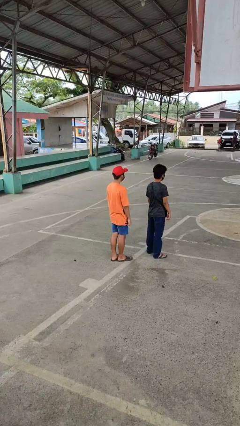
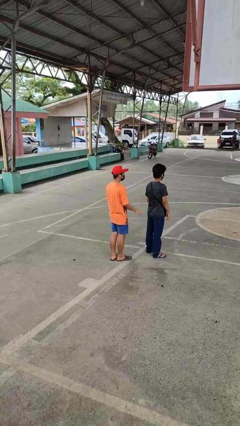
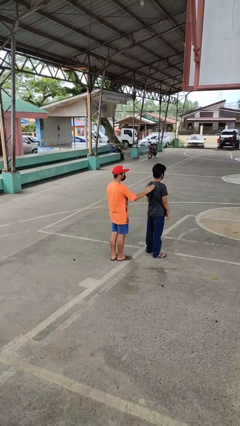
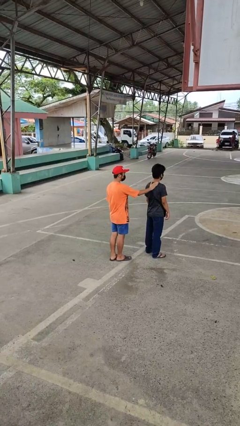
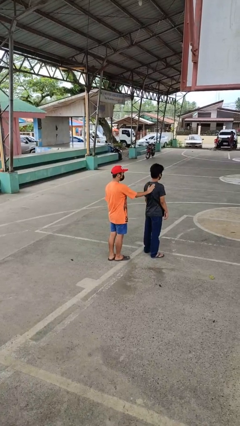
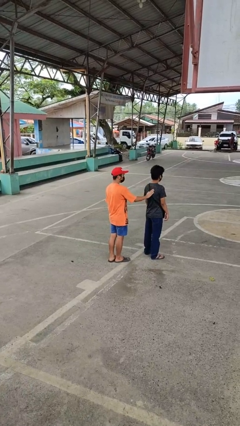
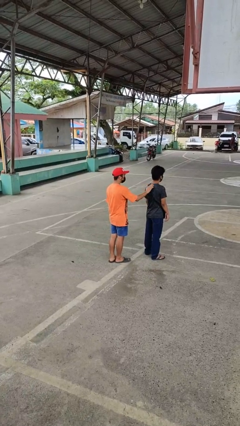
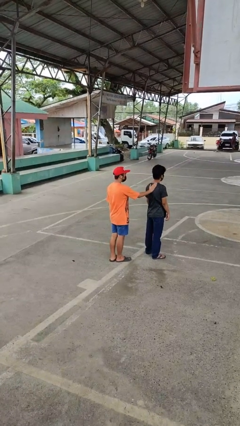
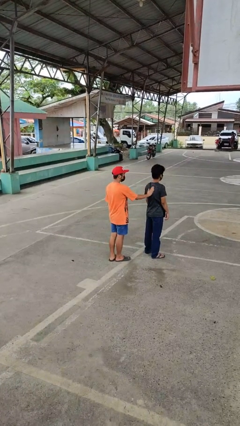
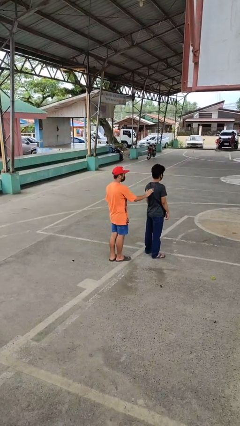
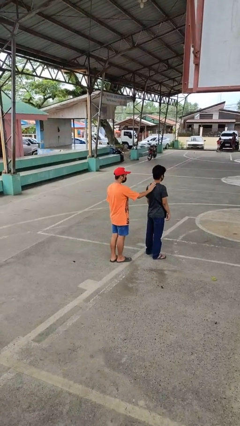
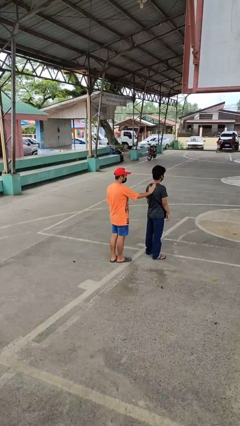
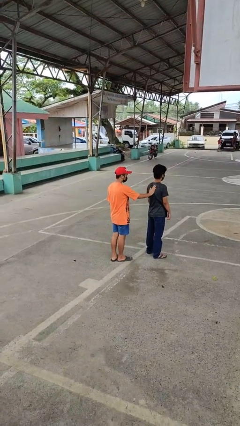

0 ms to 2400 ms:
person touches back of person

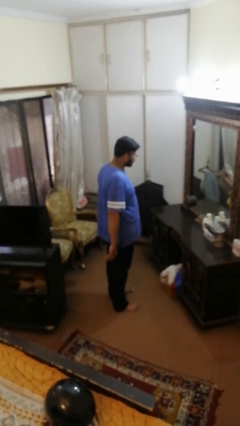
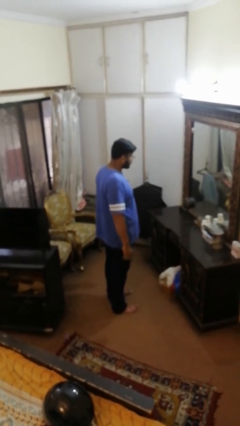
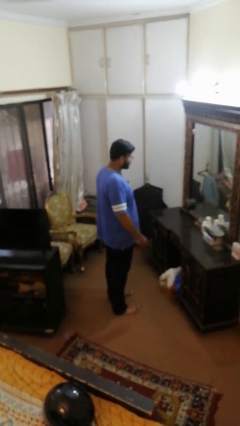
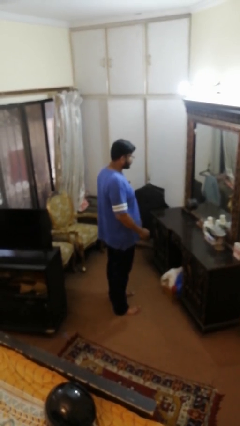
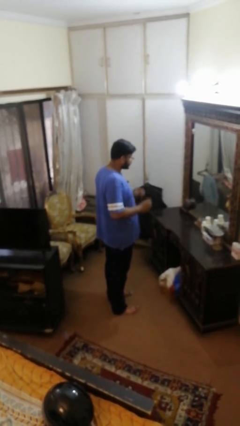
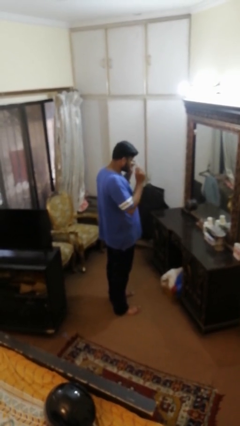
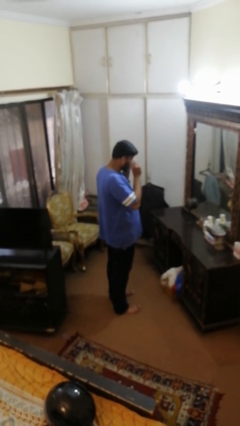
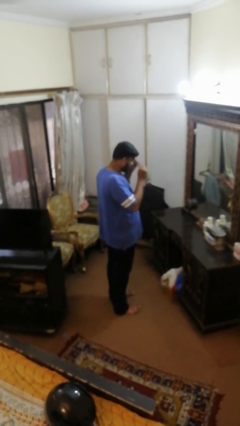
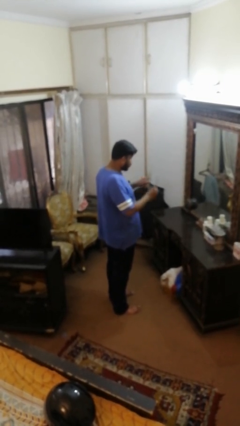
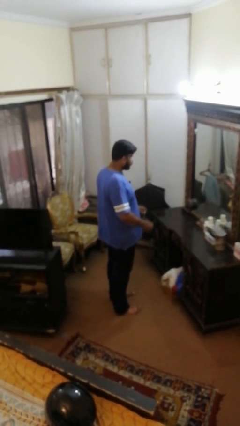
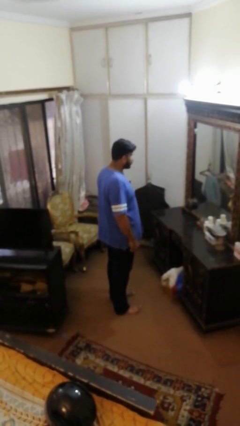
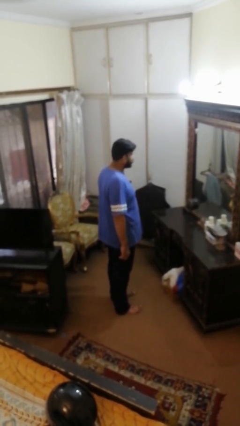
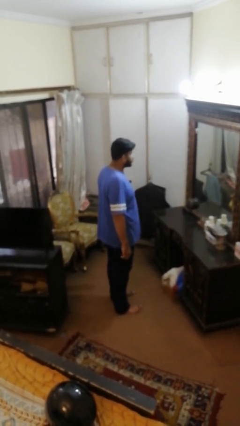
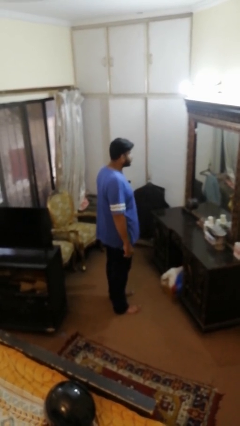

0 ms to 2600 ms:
person takes off glasses

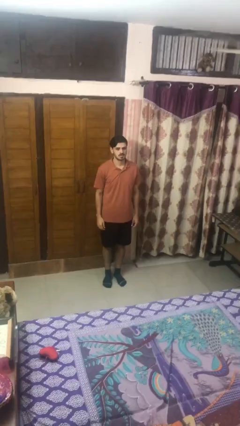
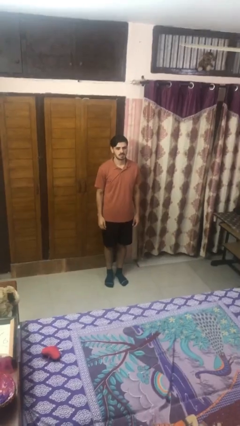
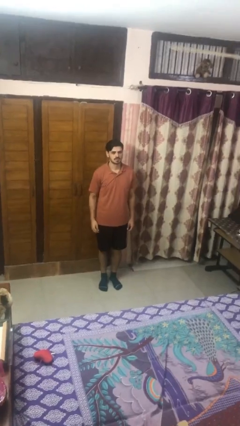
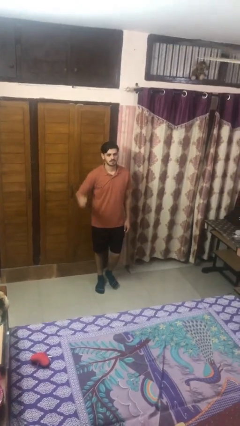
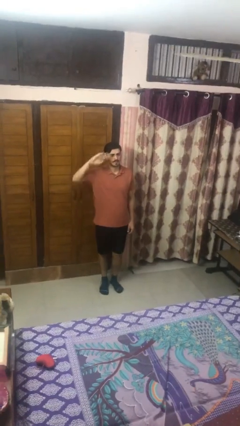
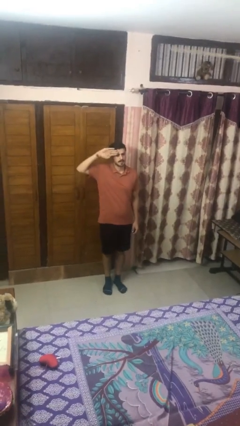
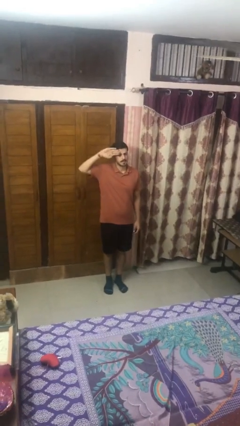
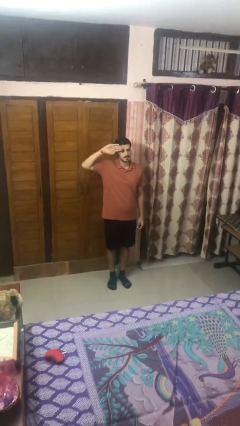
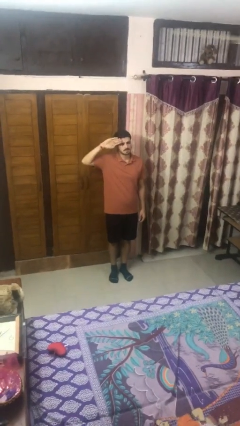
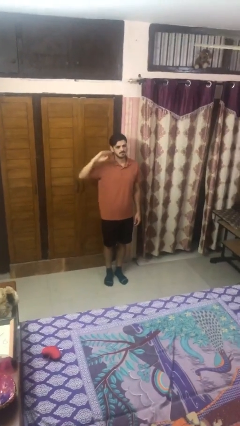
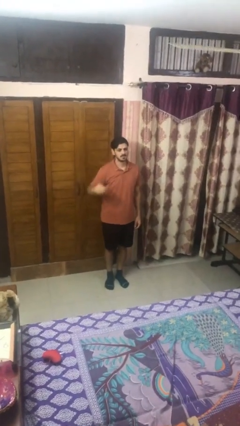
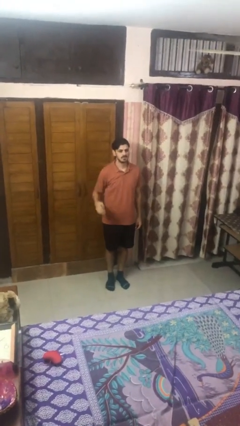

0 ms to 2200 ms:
person salutes

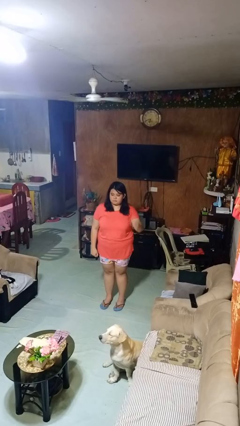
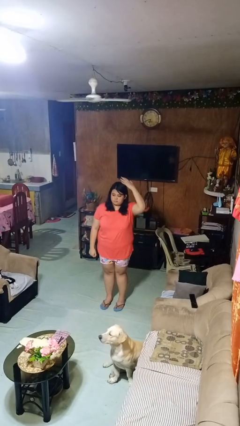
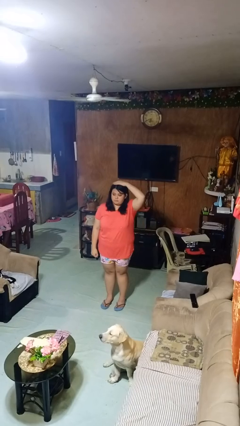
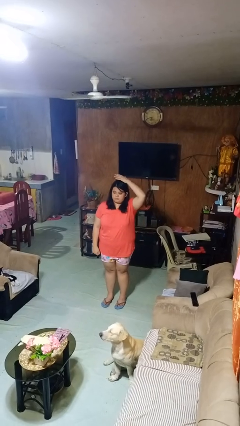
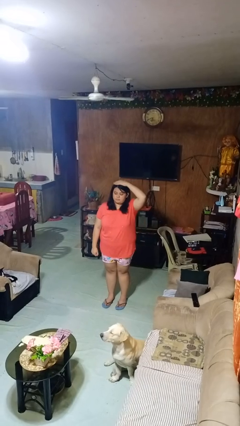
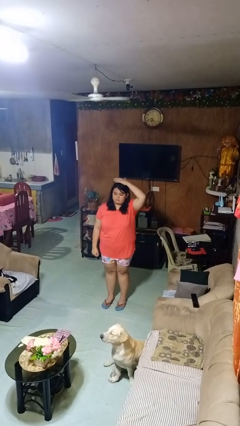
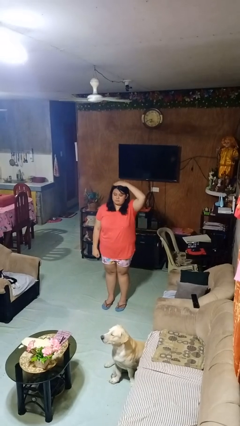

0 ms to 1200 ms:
person pats head

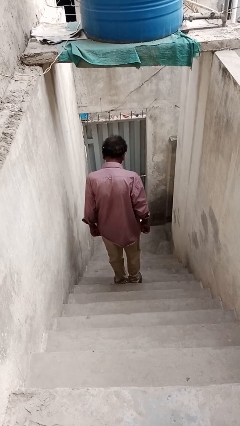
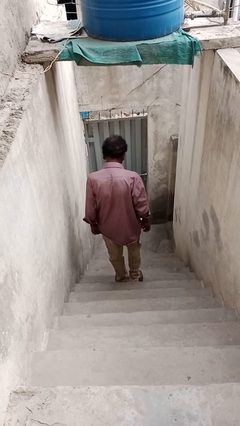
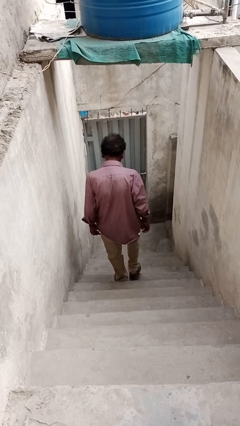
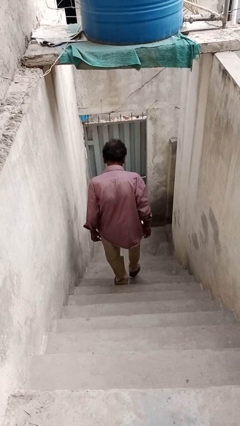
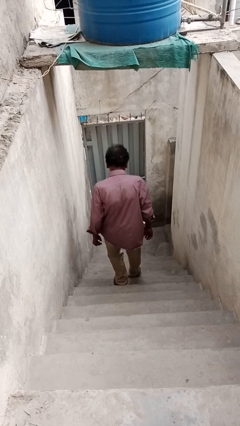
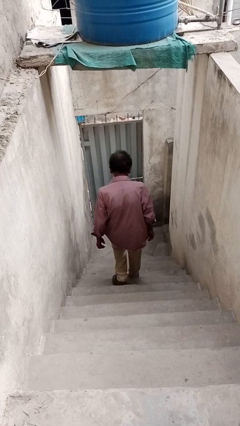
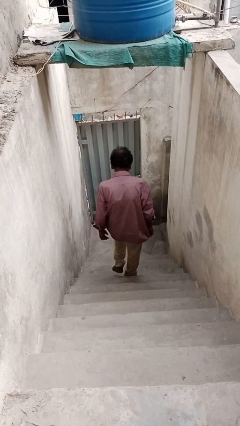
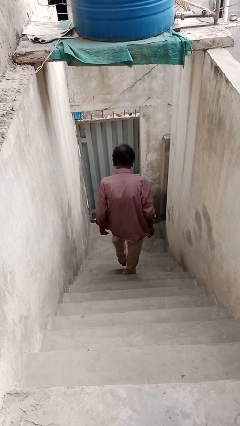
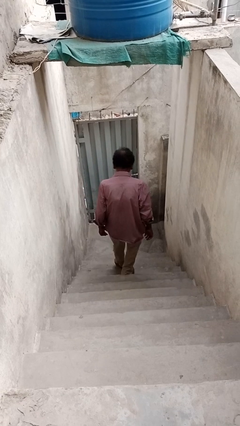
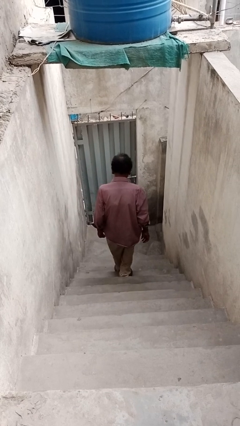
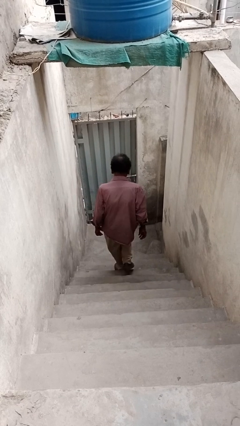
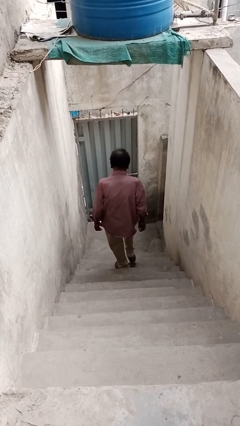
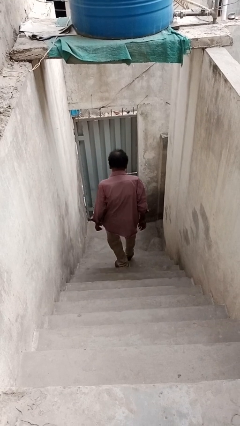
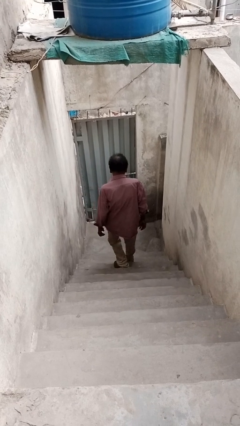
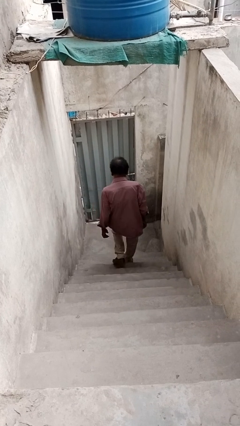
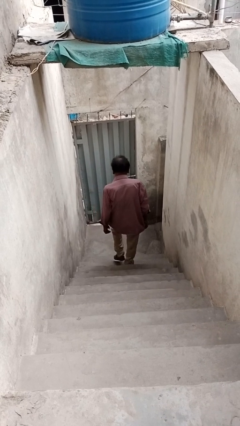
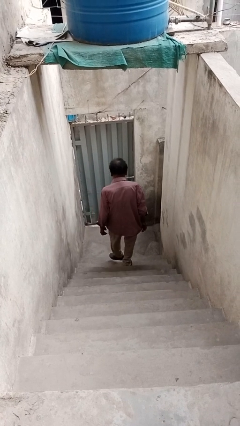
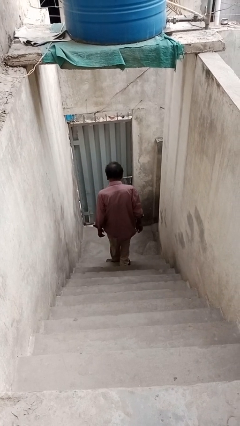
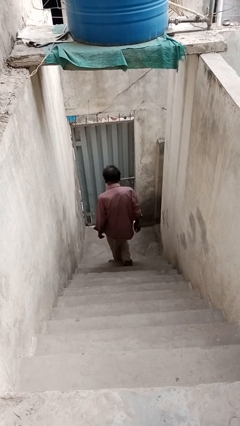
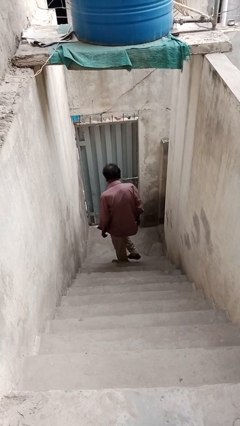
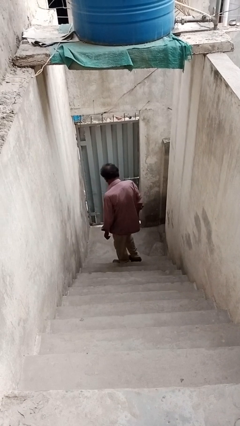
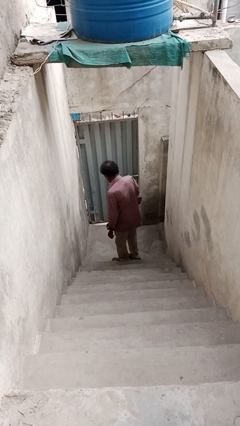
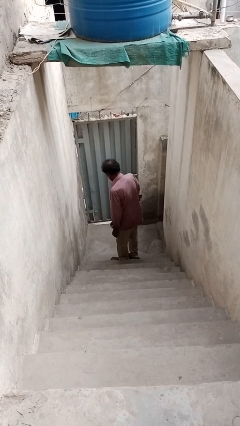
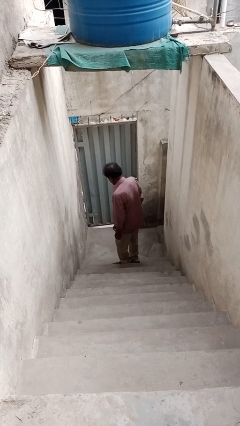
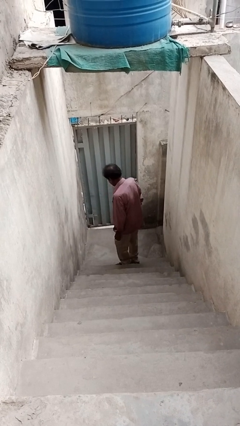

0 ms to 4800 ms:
person climbs down stairs

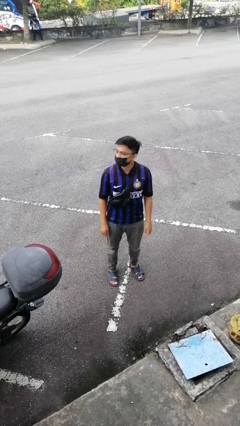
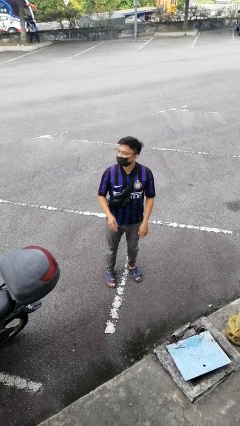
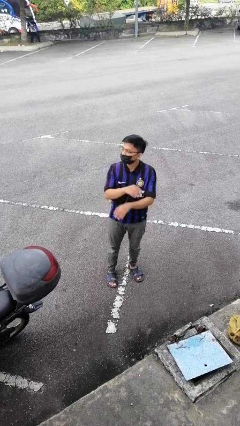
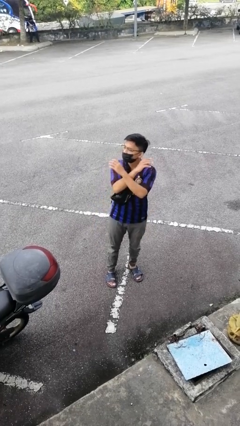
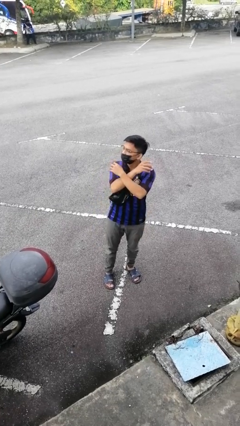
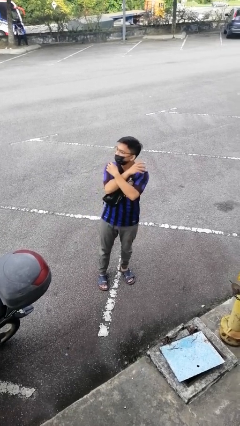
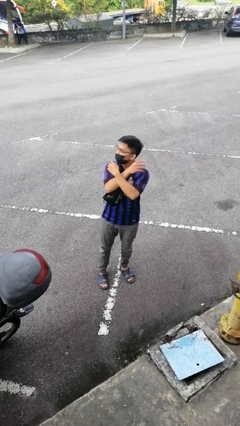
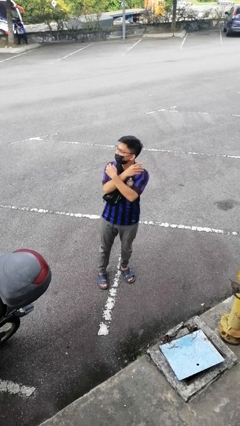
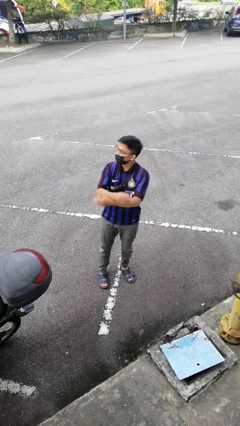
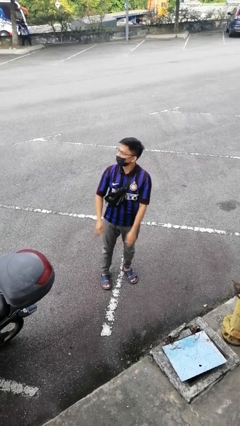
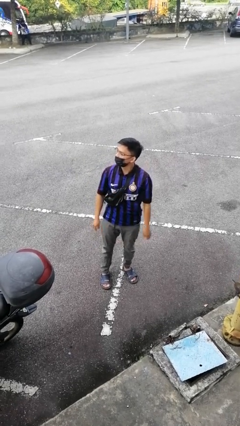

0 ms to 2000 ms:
person gestures arms x

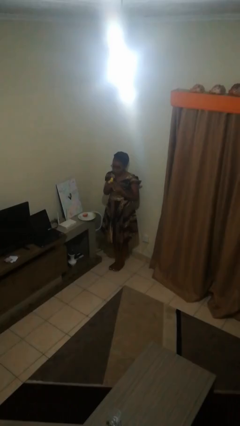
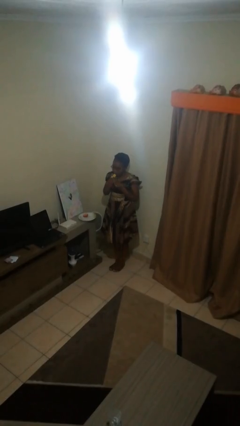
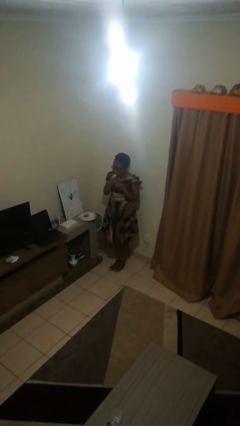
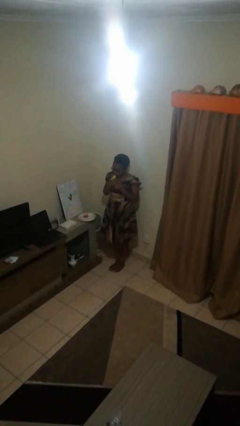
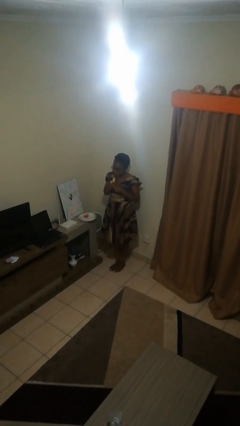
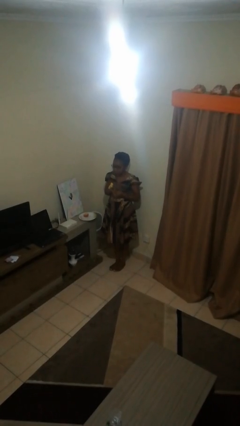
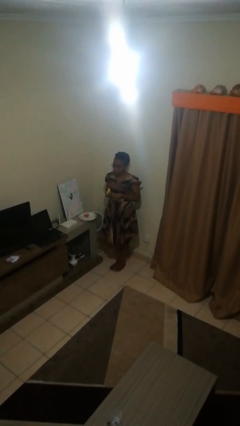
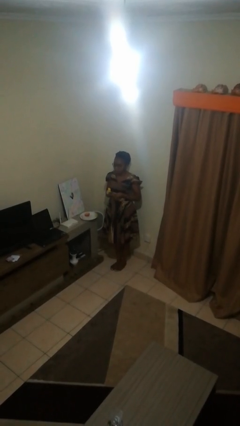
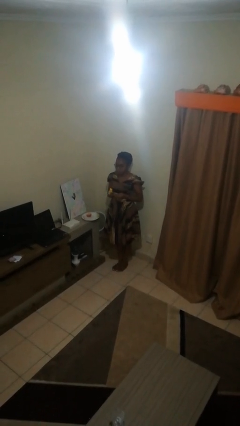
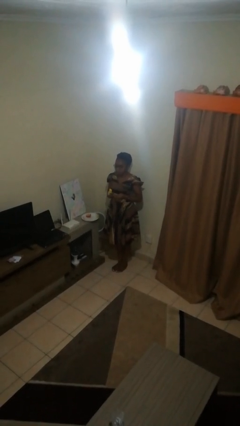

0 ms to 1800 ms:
person eats banana
